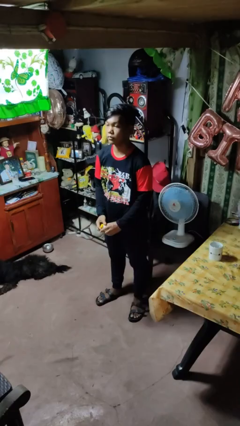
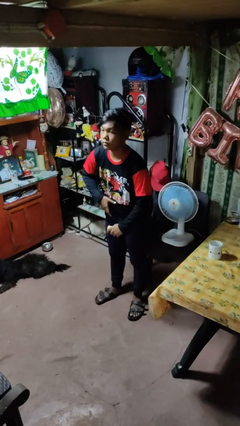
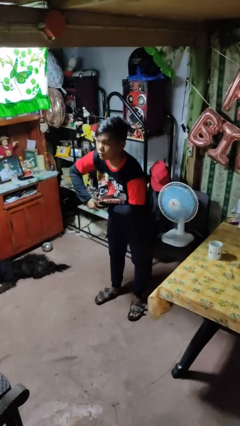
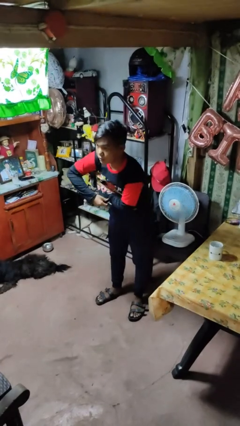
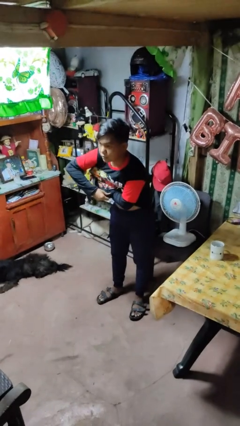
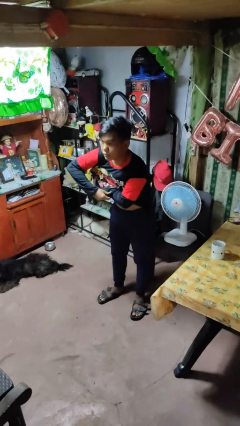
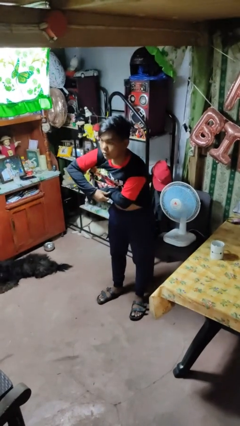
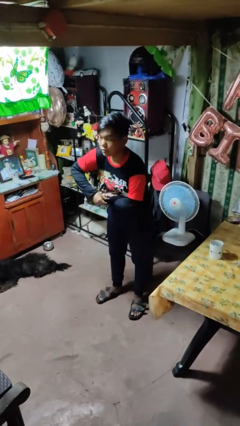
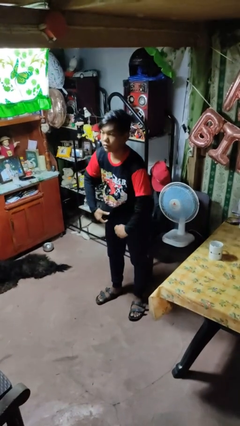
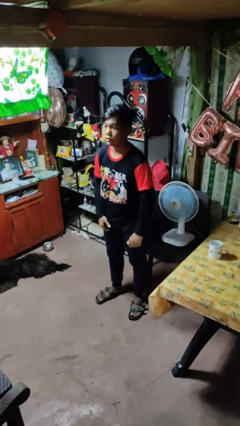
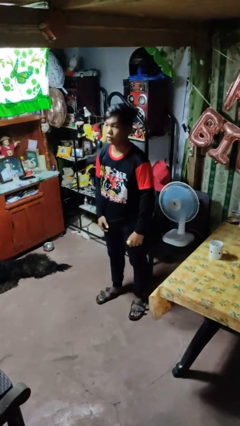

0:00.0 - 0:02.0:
person applies deodorant

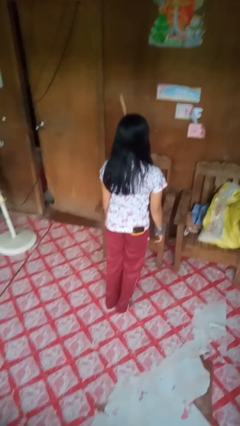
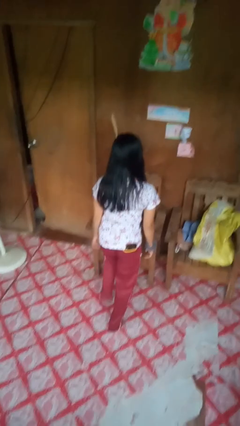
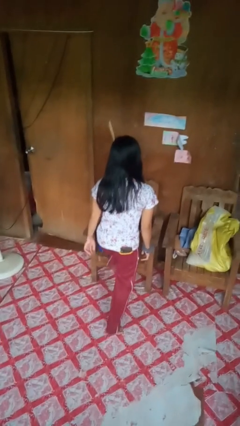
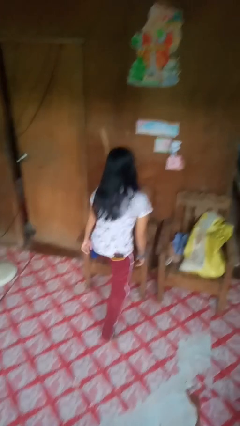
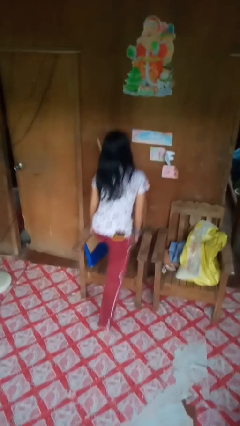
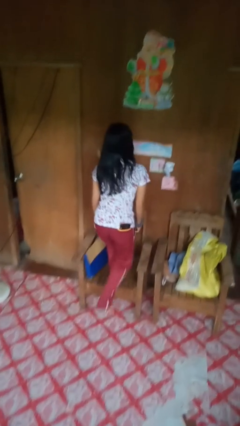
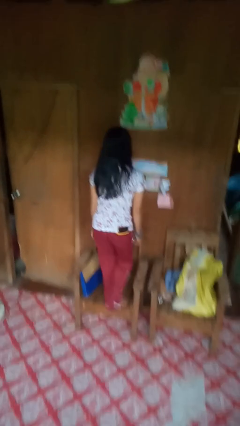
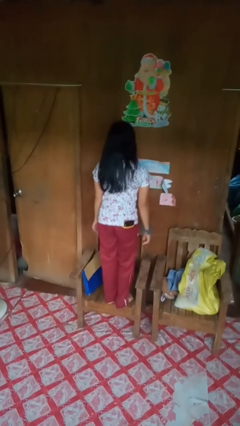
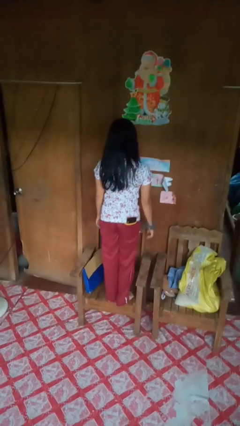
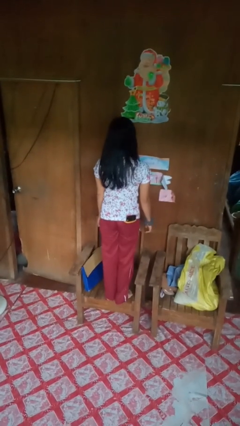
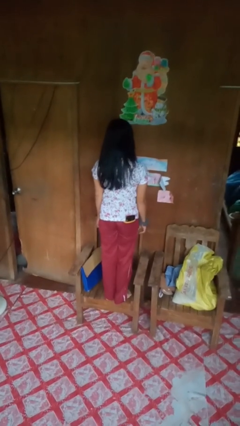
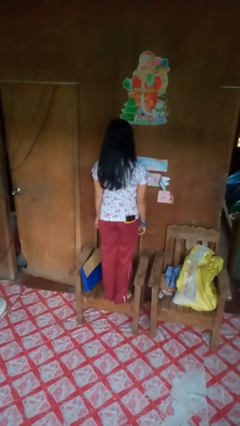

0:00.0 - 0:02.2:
person climbs on chair

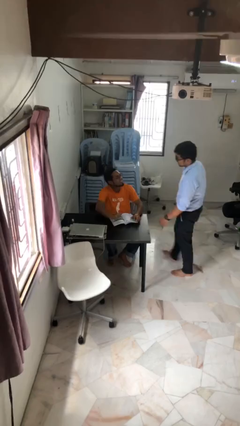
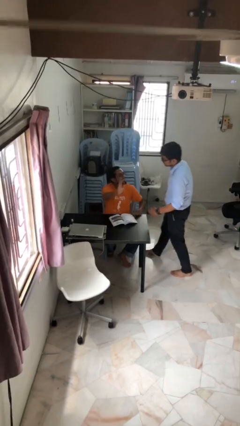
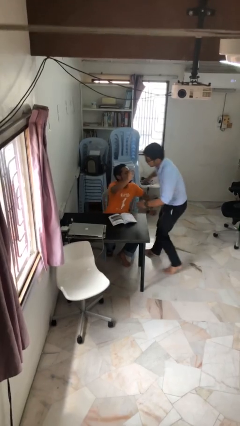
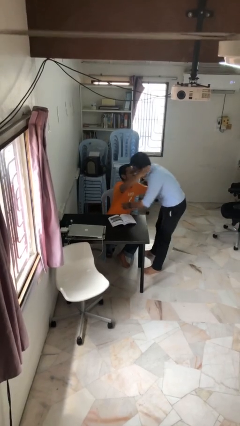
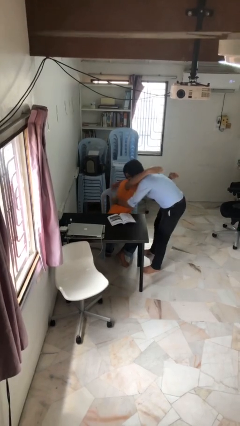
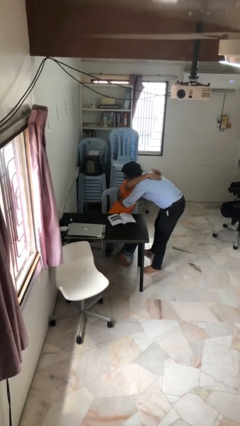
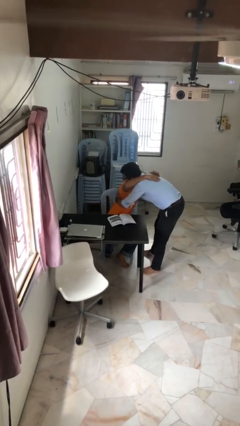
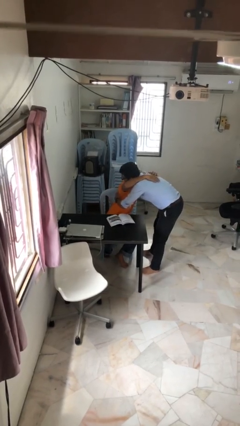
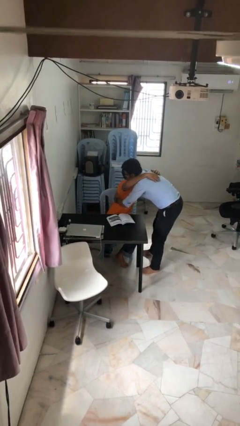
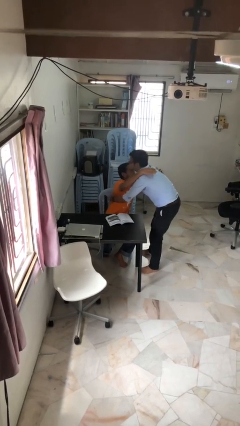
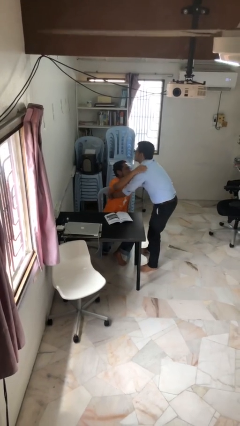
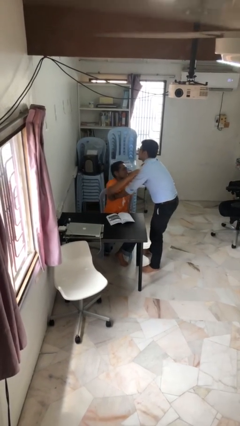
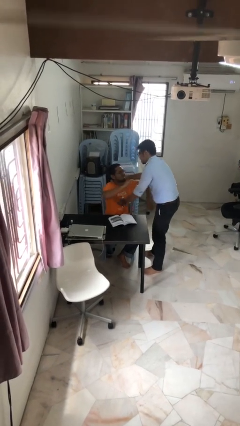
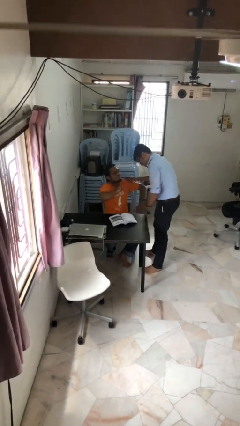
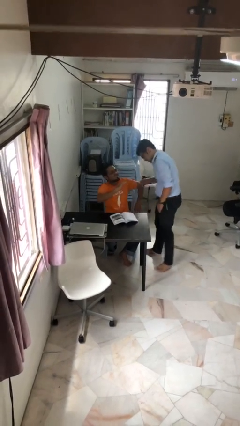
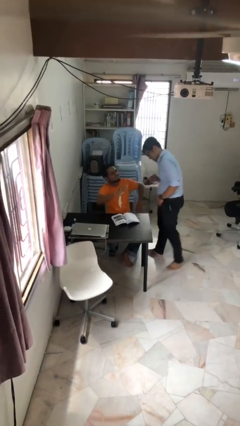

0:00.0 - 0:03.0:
person embraces person

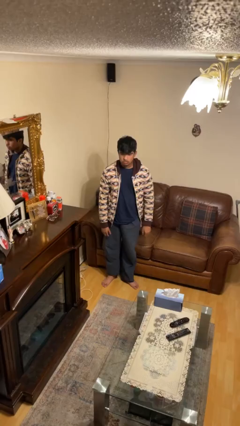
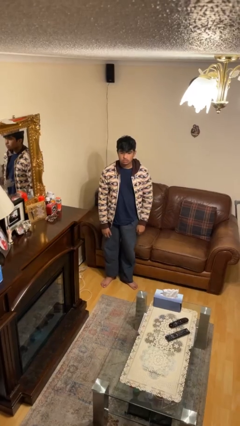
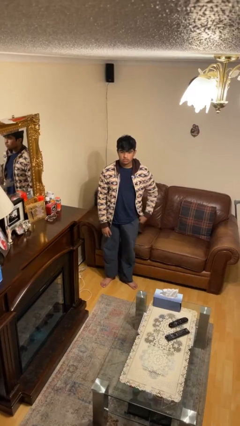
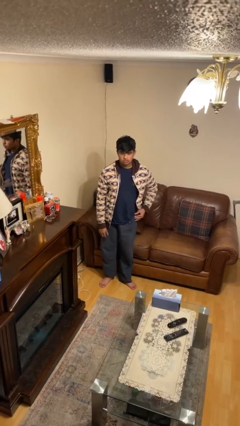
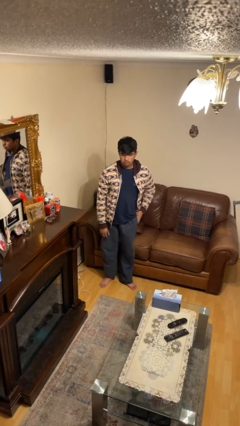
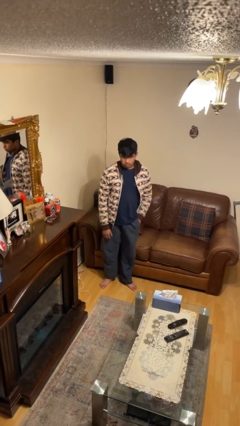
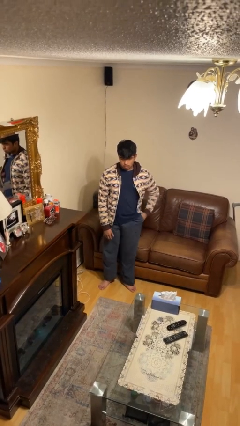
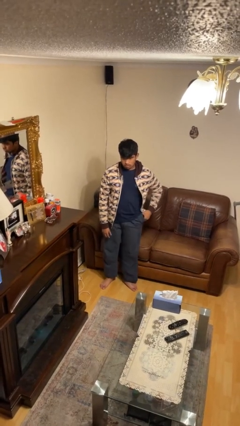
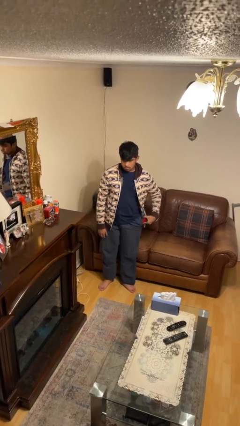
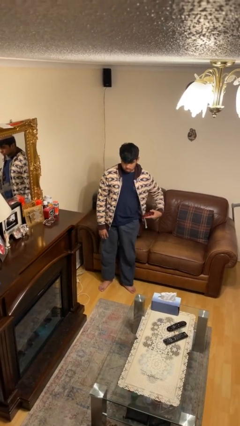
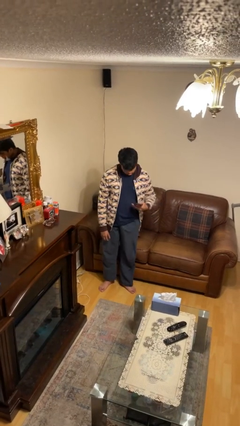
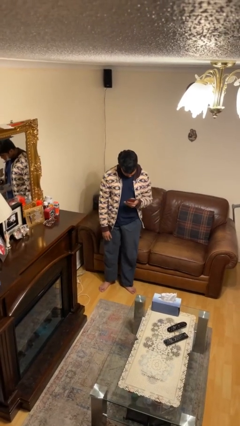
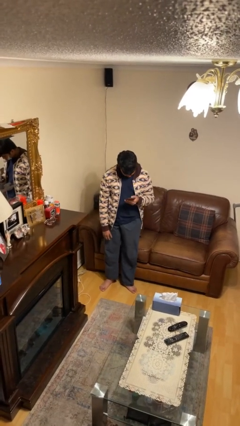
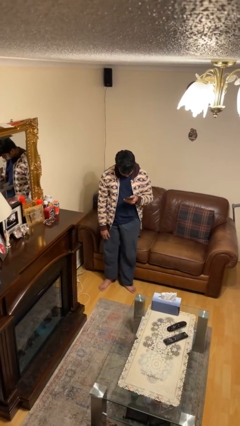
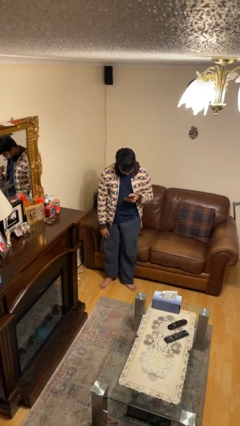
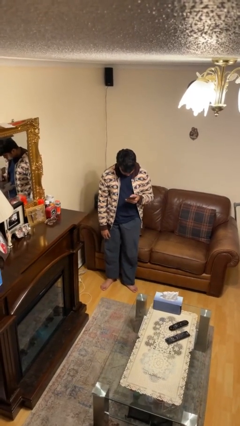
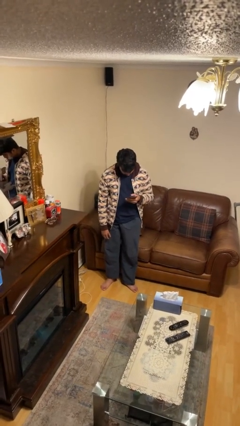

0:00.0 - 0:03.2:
person takes phone from pocket

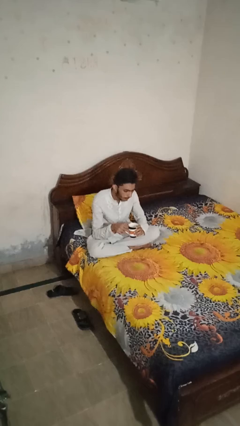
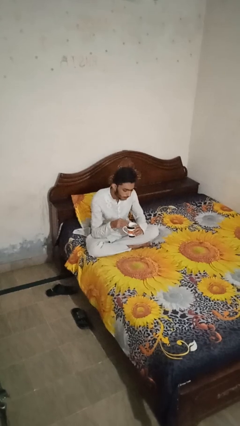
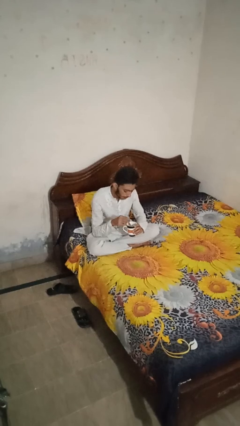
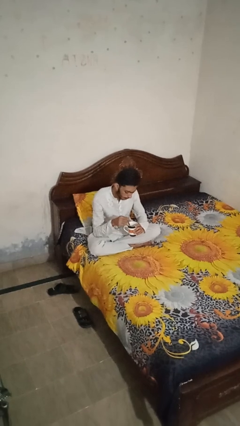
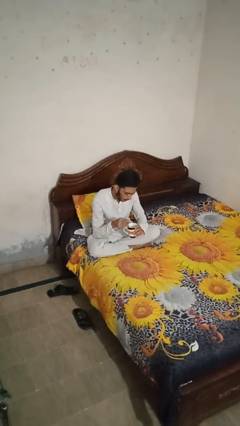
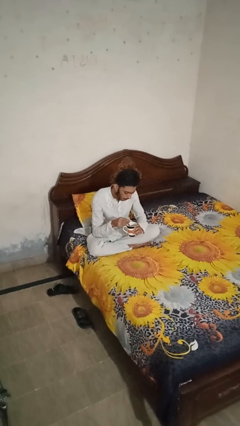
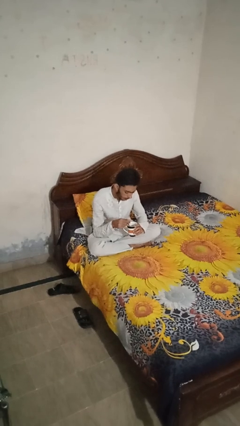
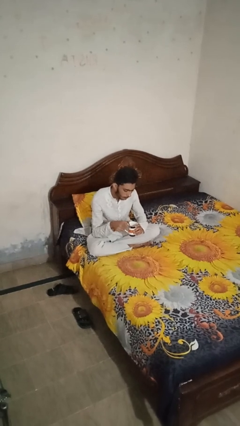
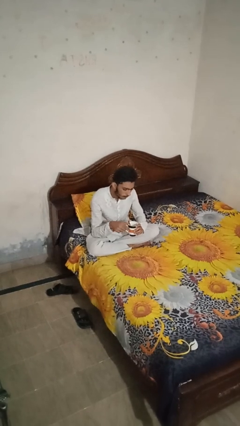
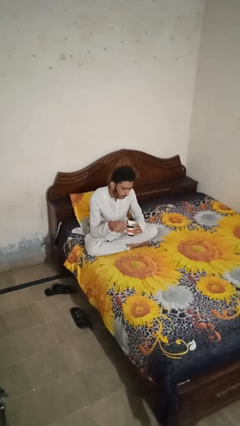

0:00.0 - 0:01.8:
person stirs mug

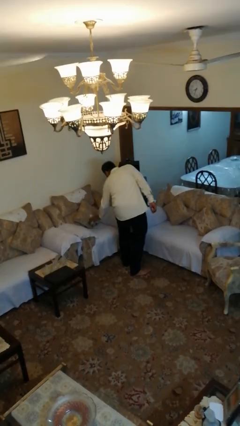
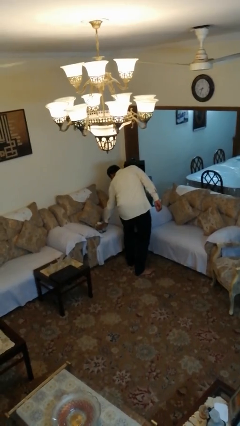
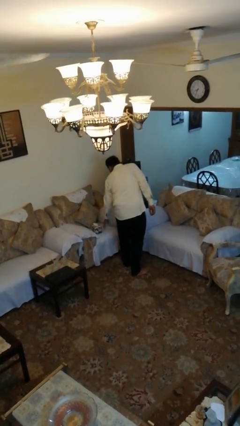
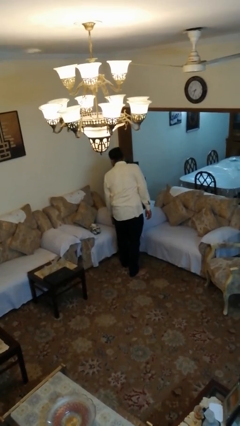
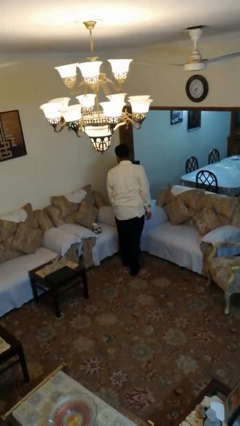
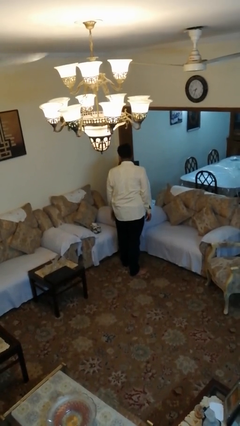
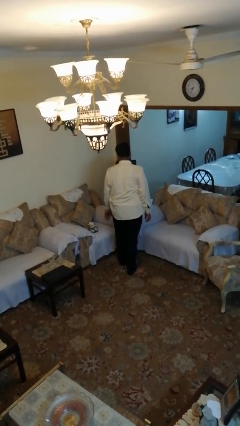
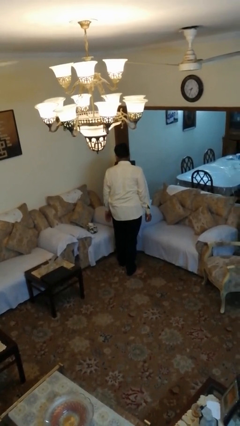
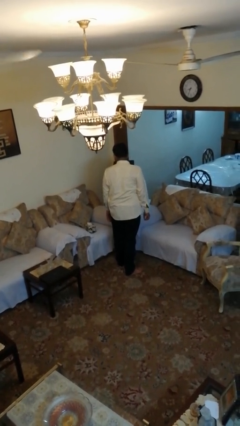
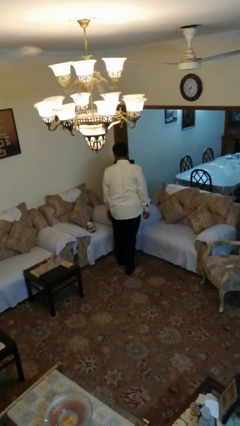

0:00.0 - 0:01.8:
person puts down object on couch

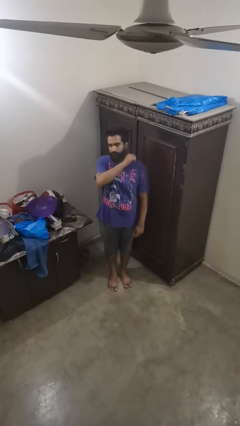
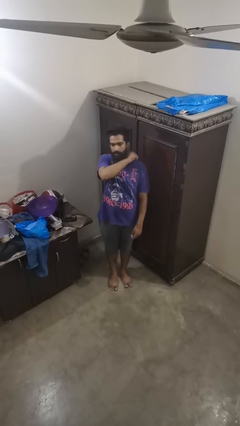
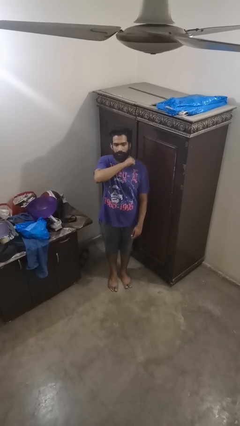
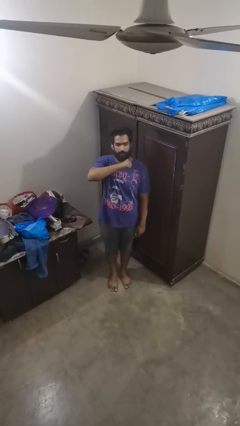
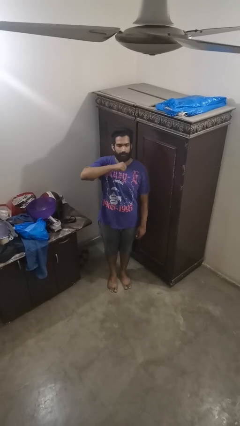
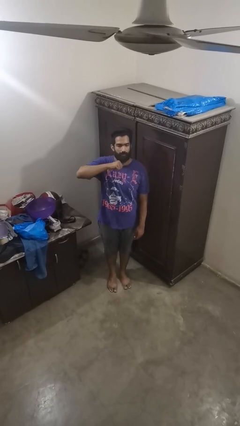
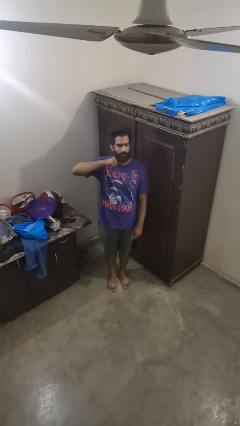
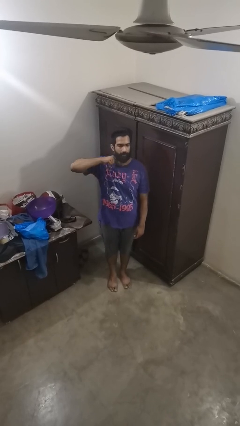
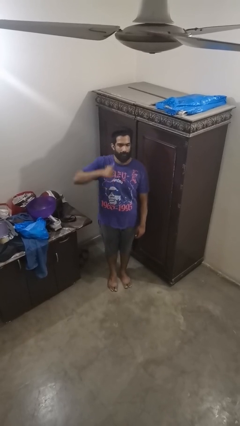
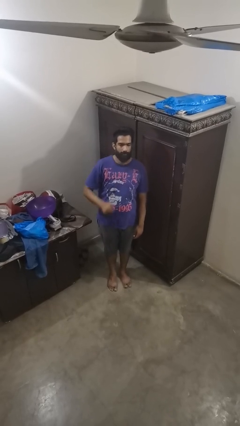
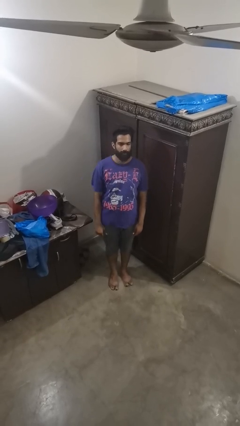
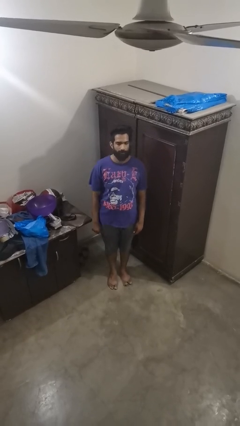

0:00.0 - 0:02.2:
person gestures cut

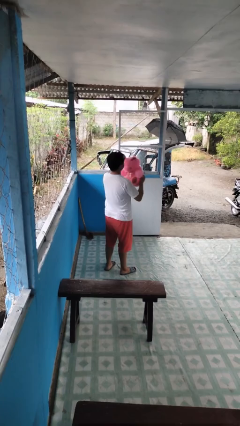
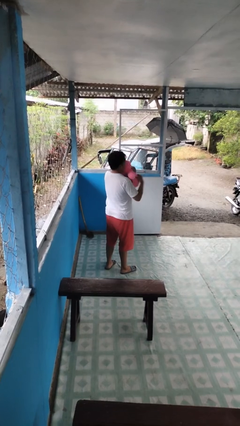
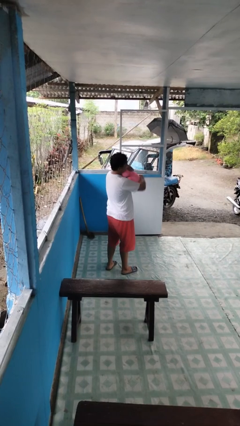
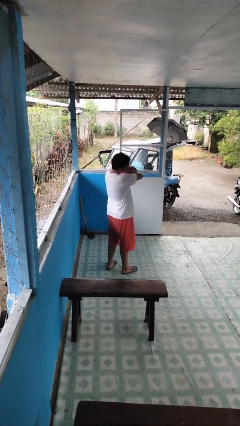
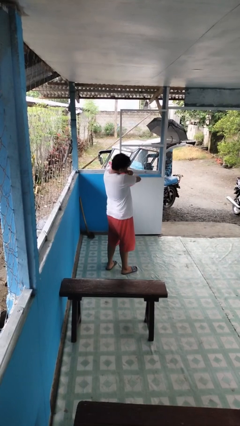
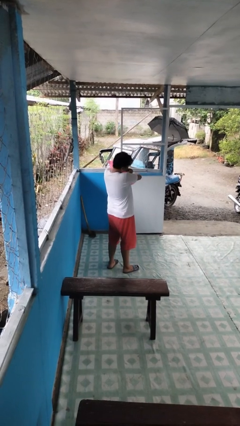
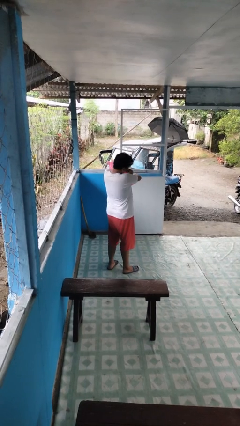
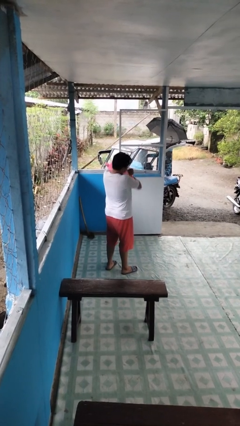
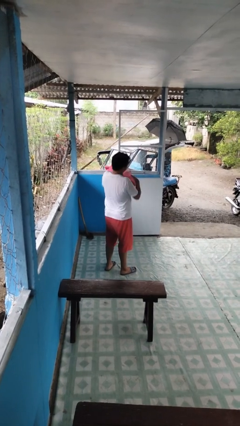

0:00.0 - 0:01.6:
person hugs stuffed animal
